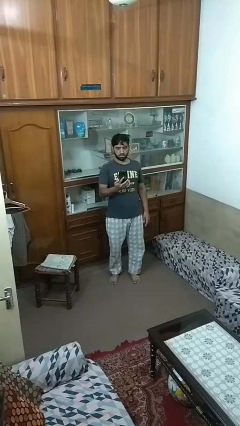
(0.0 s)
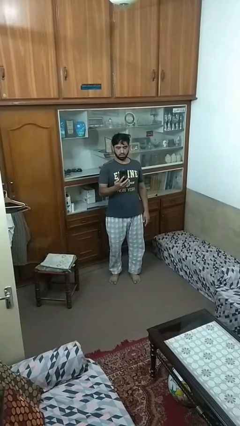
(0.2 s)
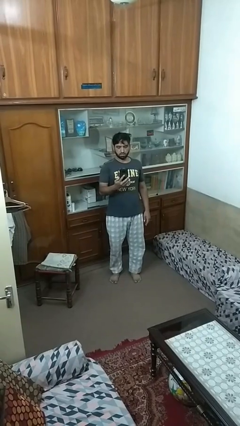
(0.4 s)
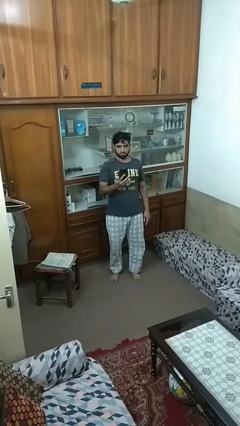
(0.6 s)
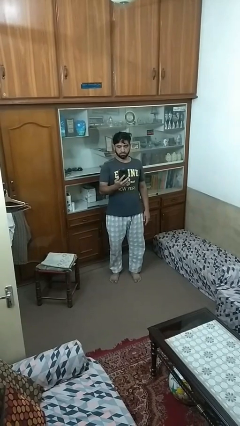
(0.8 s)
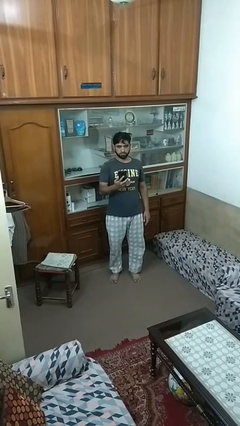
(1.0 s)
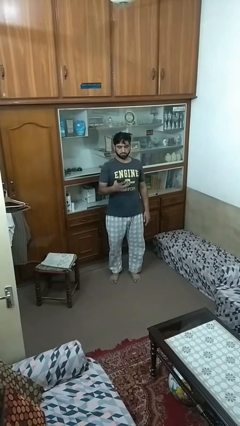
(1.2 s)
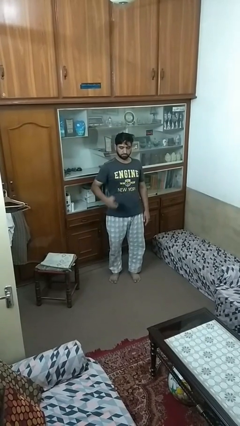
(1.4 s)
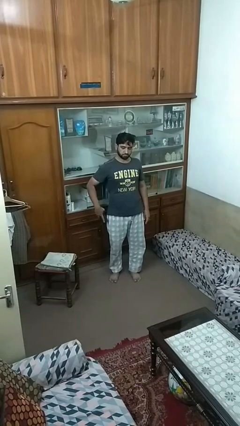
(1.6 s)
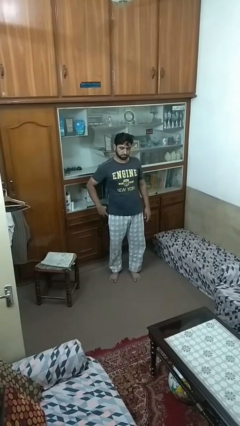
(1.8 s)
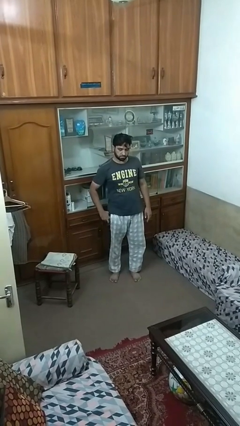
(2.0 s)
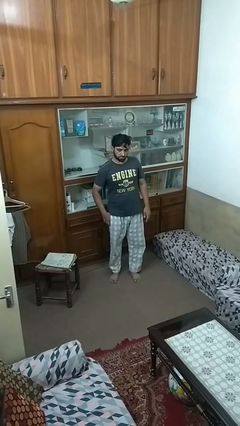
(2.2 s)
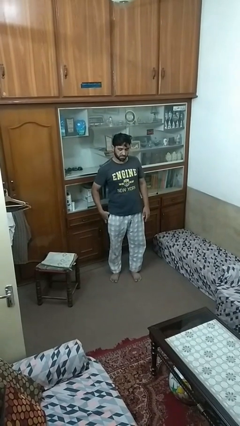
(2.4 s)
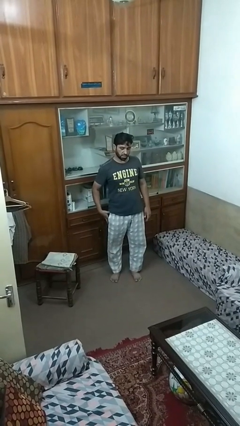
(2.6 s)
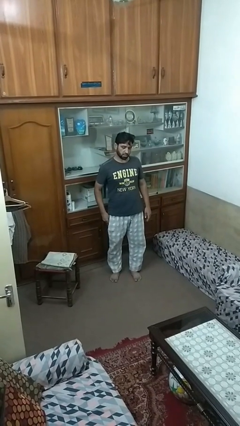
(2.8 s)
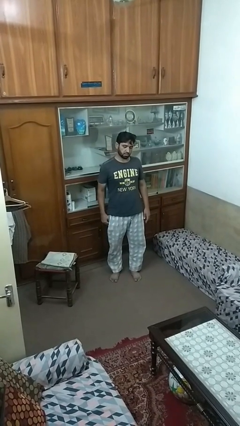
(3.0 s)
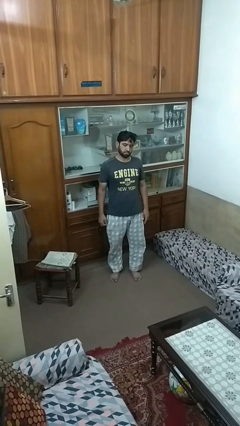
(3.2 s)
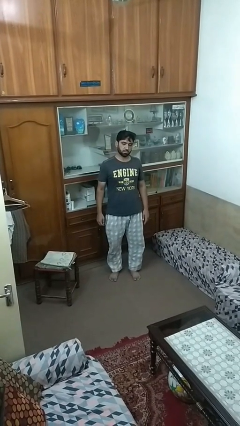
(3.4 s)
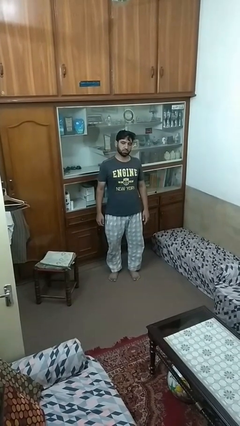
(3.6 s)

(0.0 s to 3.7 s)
person puts phone into pocket

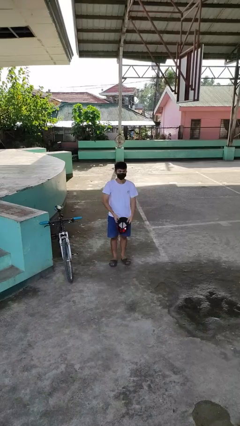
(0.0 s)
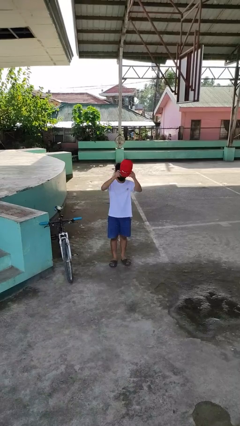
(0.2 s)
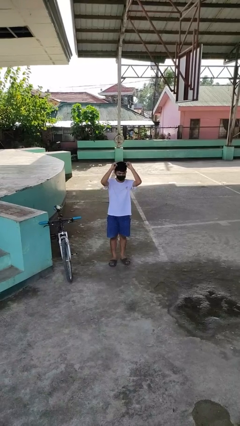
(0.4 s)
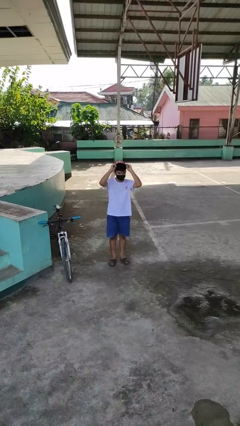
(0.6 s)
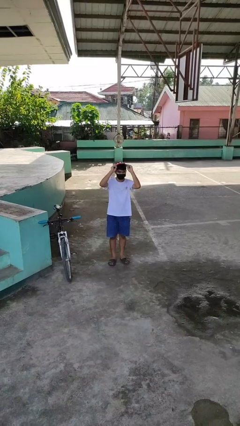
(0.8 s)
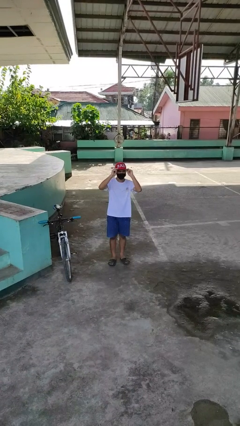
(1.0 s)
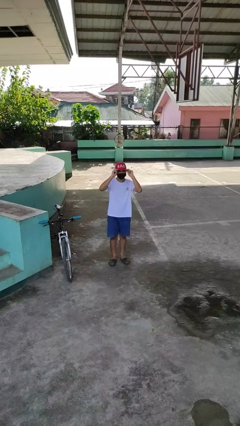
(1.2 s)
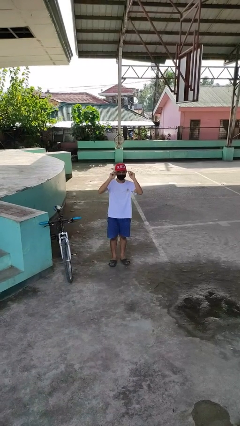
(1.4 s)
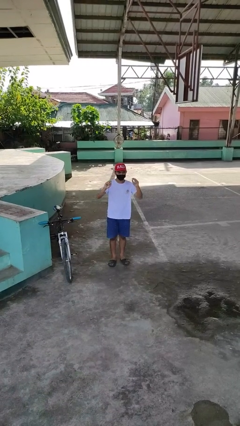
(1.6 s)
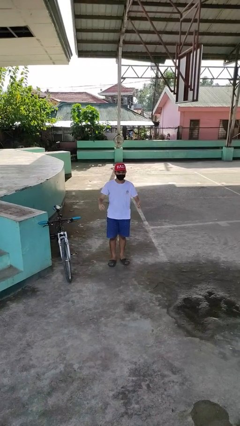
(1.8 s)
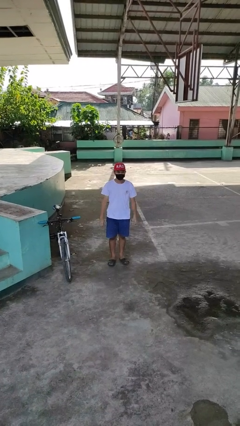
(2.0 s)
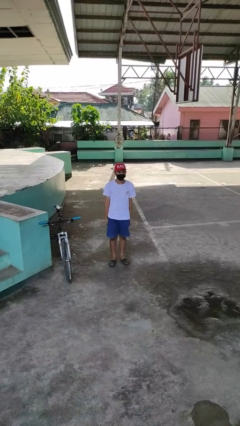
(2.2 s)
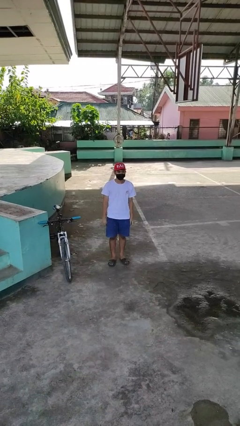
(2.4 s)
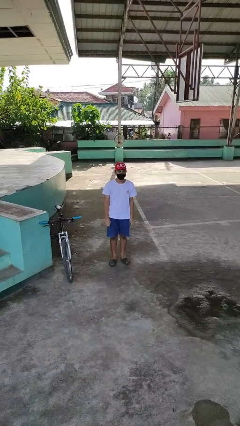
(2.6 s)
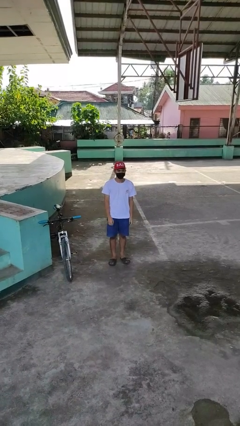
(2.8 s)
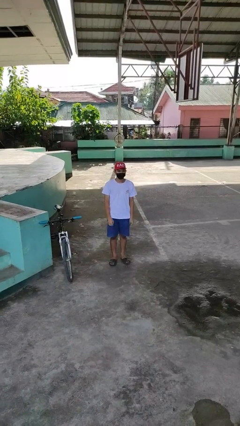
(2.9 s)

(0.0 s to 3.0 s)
person puts on hat

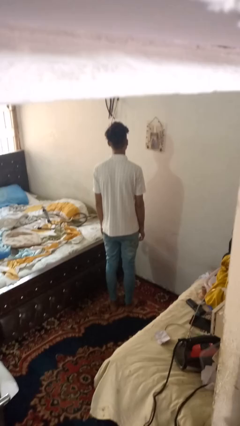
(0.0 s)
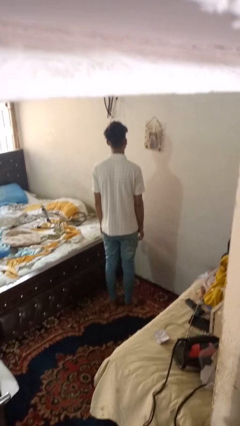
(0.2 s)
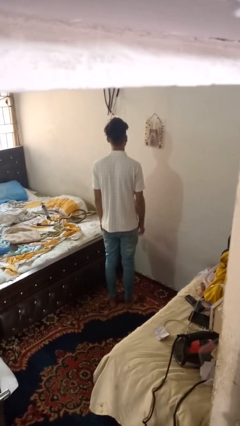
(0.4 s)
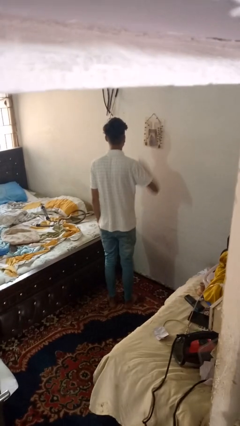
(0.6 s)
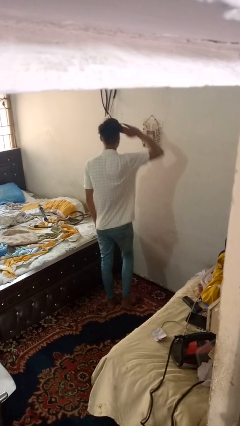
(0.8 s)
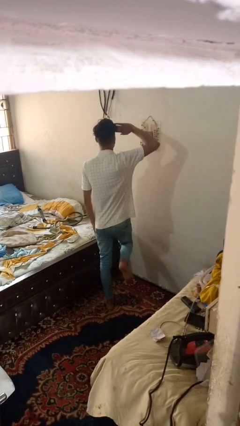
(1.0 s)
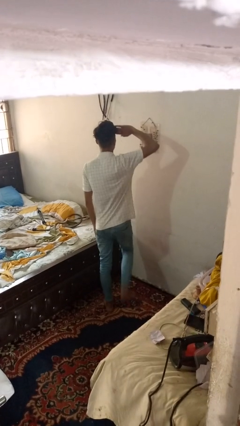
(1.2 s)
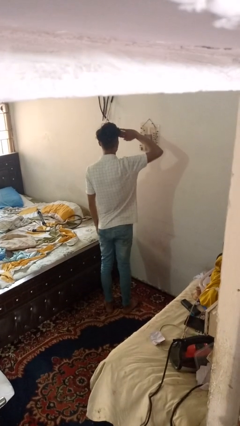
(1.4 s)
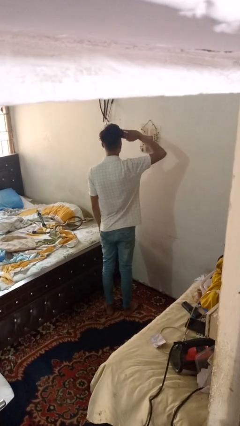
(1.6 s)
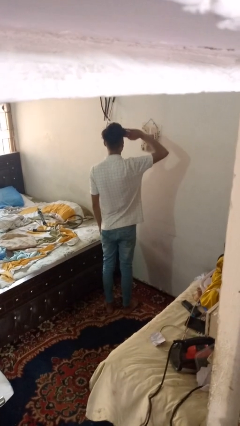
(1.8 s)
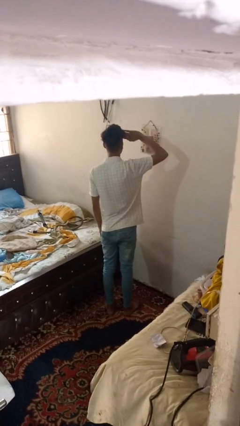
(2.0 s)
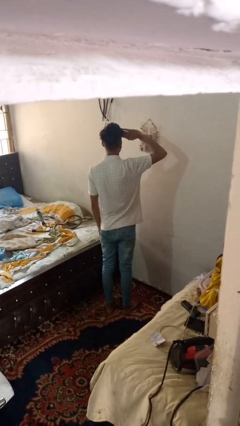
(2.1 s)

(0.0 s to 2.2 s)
person salutes

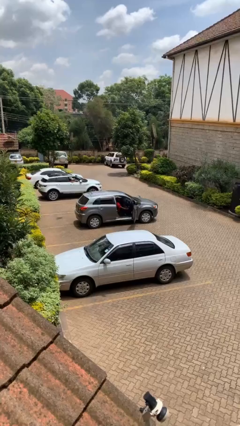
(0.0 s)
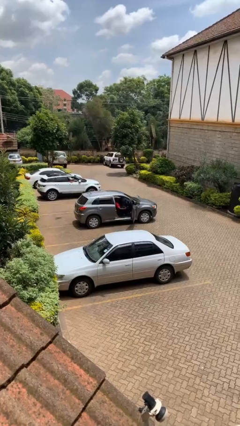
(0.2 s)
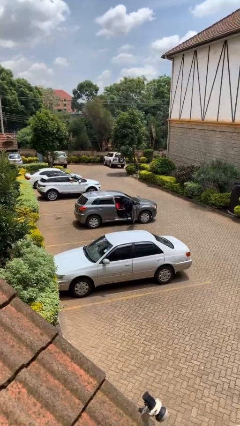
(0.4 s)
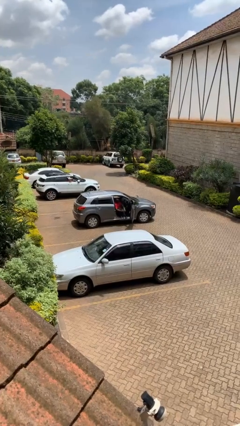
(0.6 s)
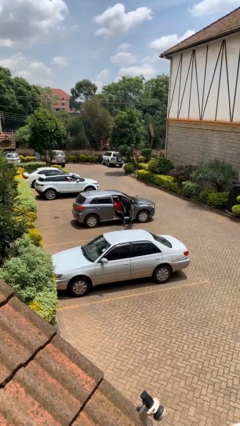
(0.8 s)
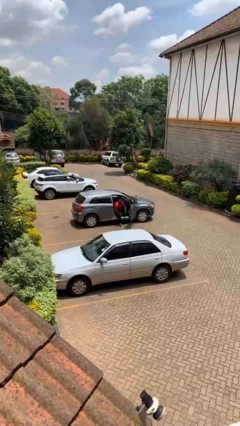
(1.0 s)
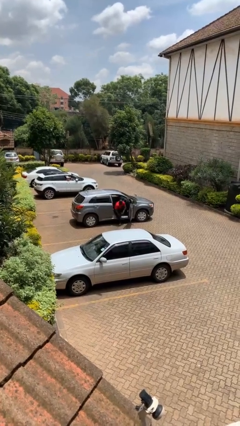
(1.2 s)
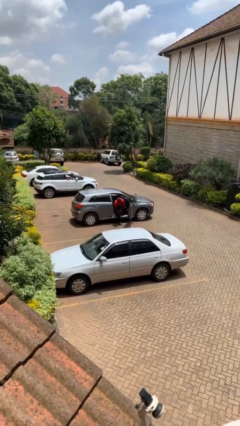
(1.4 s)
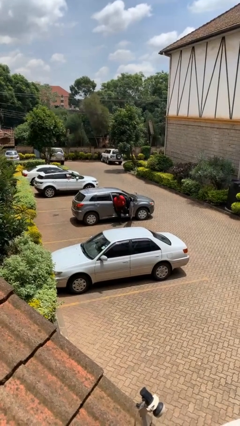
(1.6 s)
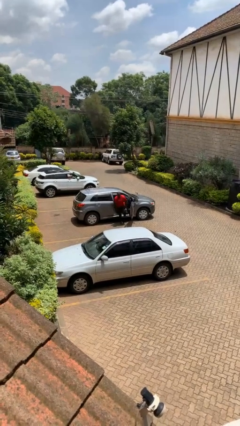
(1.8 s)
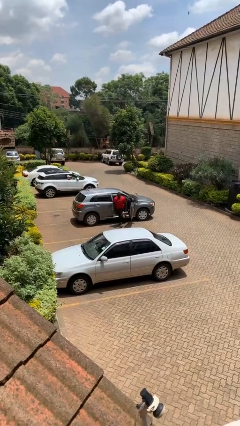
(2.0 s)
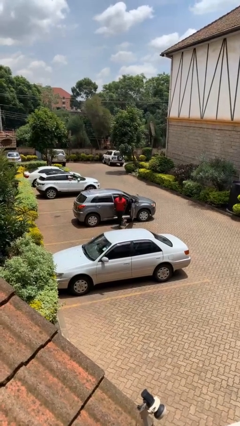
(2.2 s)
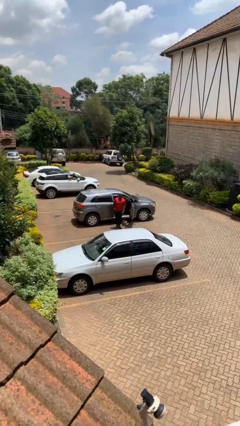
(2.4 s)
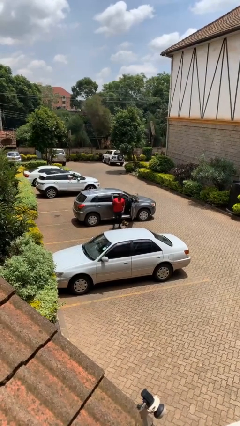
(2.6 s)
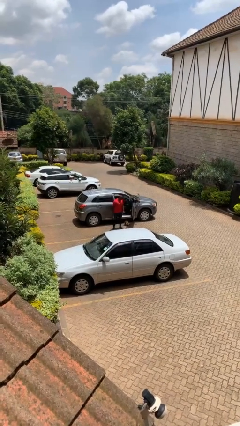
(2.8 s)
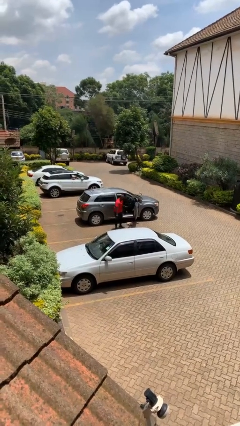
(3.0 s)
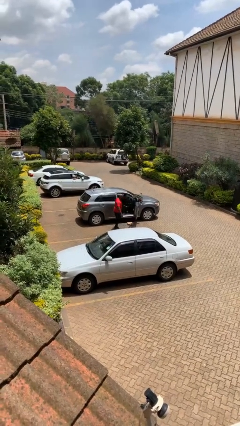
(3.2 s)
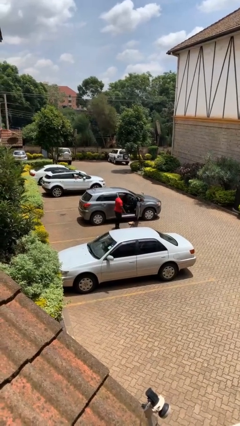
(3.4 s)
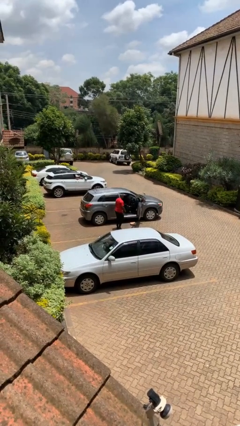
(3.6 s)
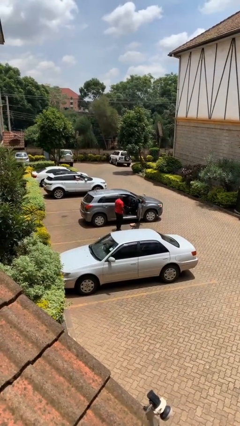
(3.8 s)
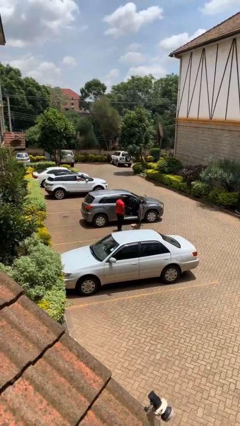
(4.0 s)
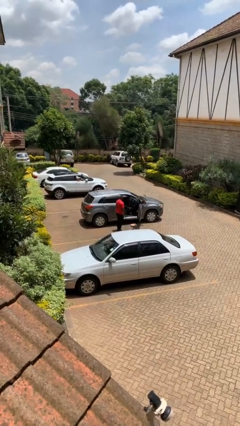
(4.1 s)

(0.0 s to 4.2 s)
person exits car

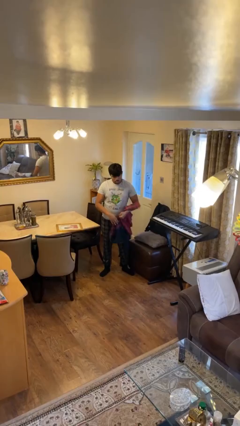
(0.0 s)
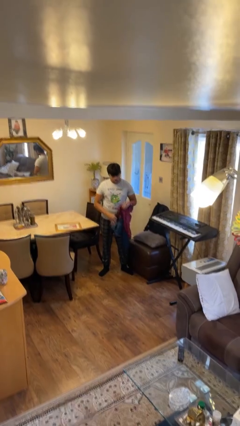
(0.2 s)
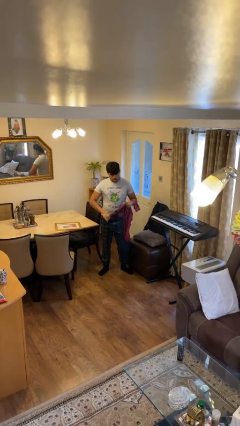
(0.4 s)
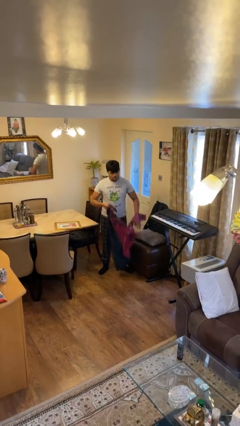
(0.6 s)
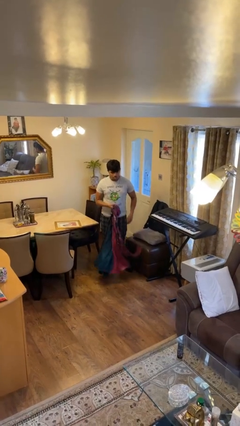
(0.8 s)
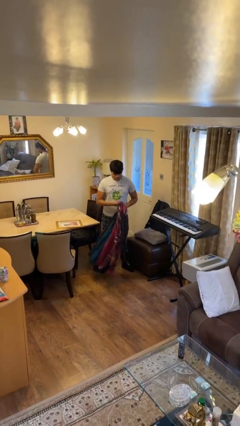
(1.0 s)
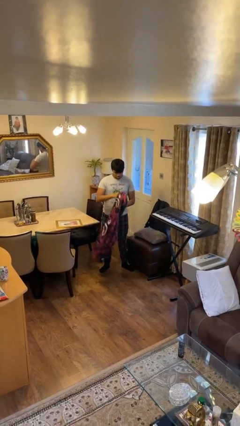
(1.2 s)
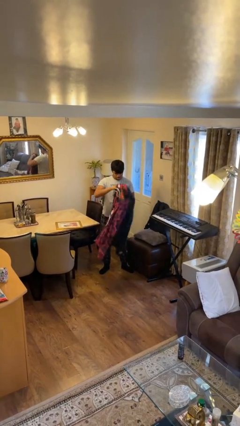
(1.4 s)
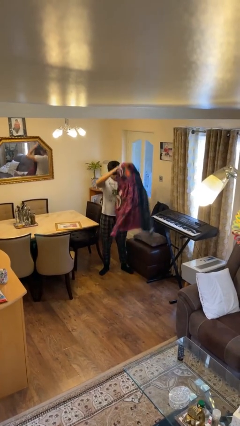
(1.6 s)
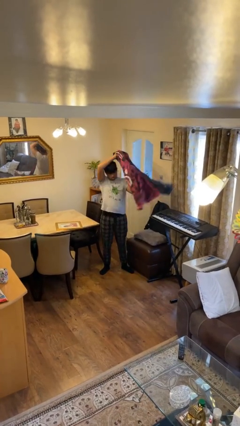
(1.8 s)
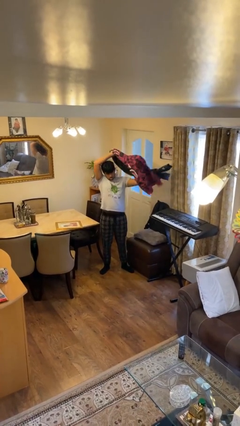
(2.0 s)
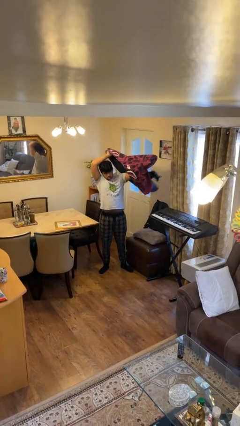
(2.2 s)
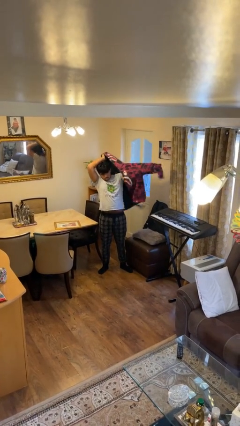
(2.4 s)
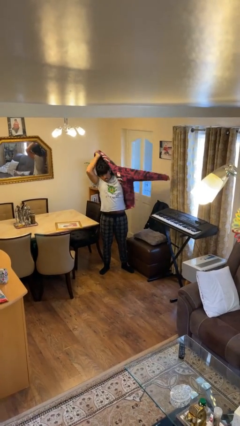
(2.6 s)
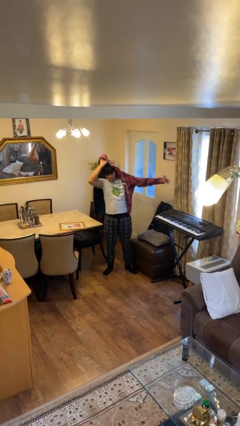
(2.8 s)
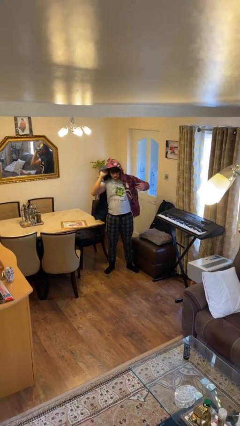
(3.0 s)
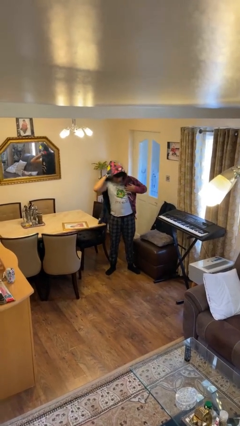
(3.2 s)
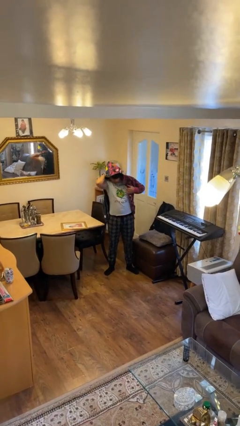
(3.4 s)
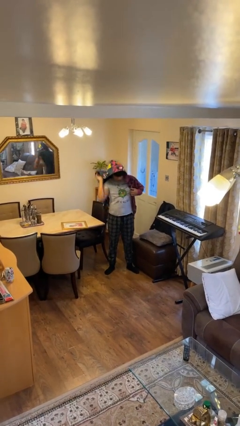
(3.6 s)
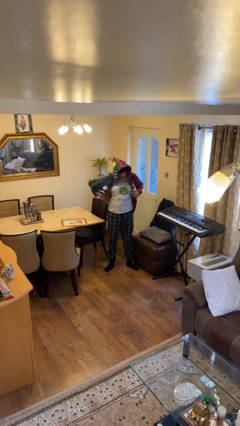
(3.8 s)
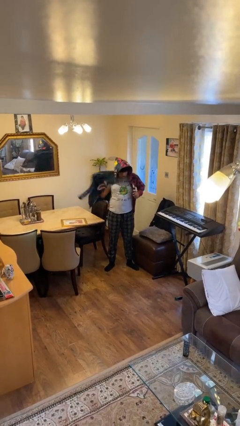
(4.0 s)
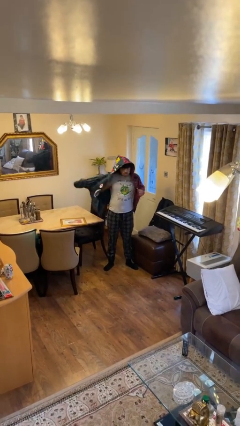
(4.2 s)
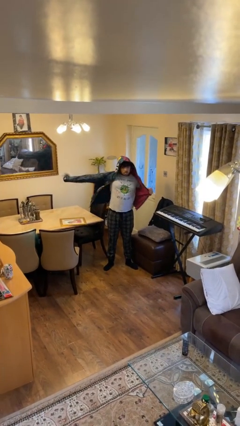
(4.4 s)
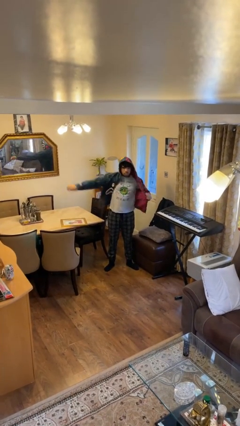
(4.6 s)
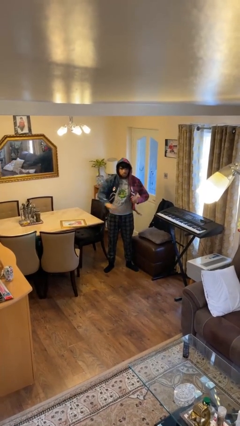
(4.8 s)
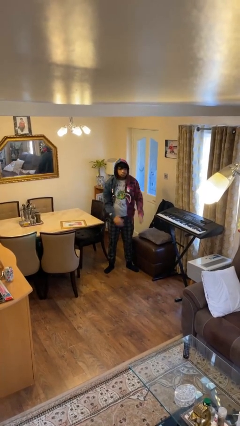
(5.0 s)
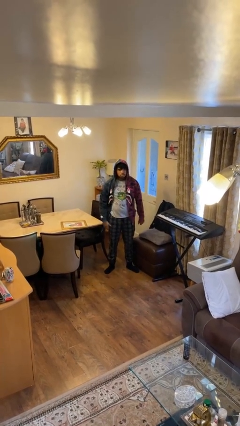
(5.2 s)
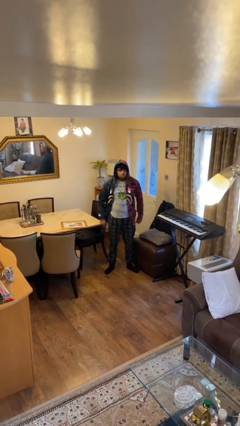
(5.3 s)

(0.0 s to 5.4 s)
person puts on hoodie
